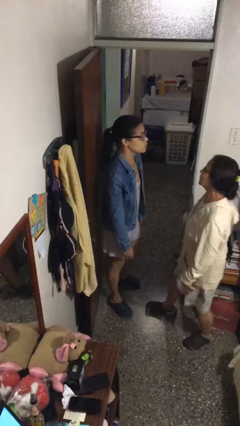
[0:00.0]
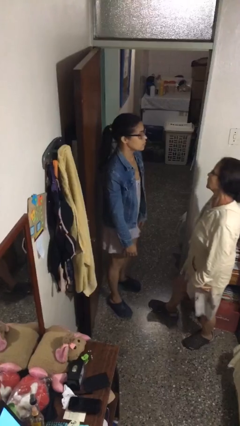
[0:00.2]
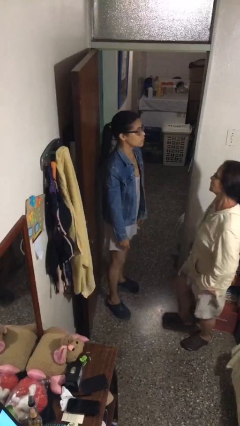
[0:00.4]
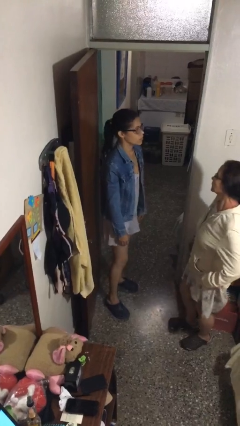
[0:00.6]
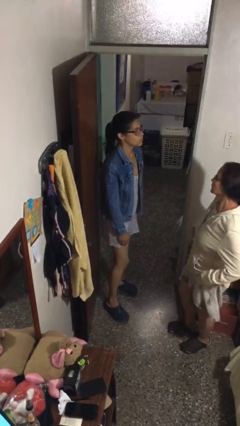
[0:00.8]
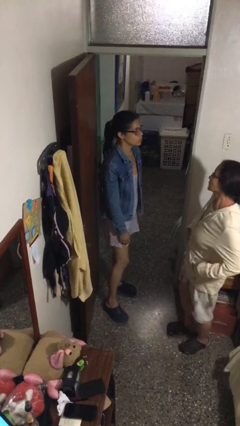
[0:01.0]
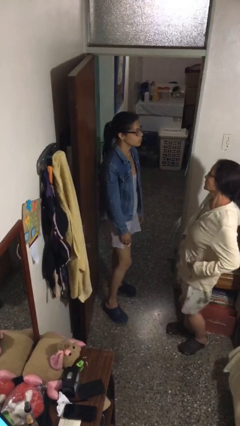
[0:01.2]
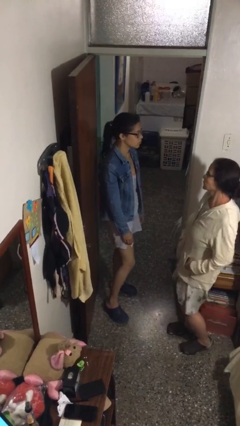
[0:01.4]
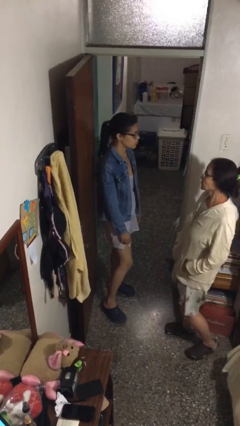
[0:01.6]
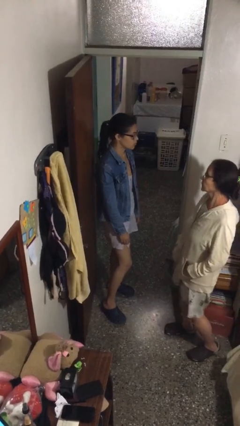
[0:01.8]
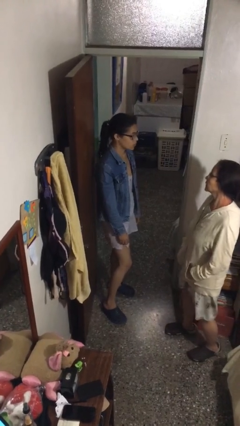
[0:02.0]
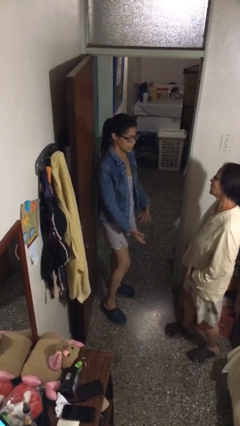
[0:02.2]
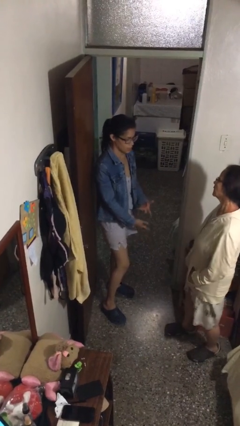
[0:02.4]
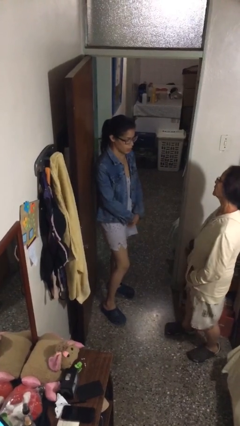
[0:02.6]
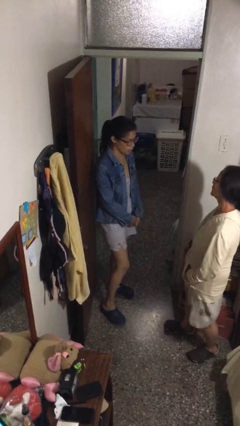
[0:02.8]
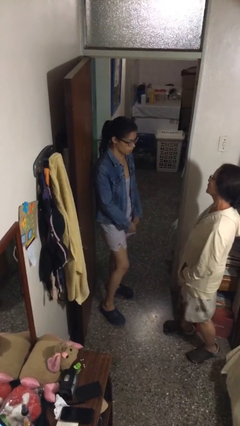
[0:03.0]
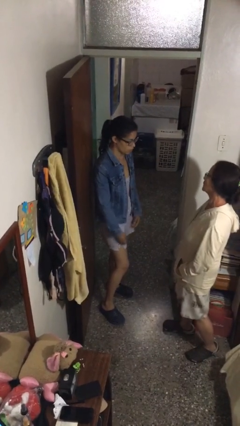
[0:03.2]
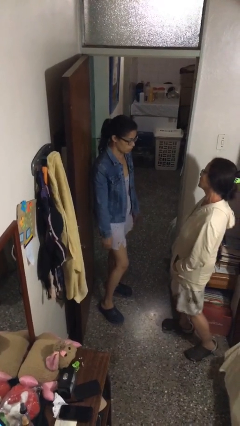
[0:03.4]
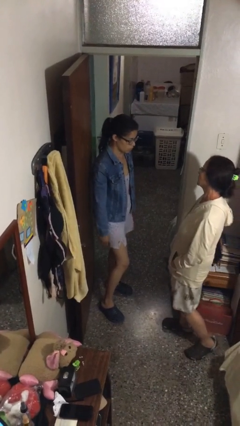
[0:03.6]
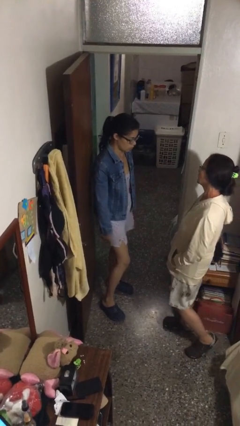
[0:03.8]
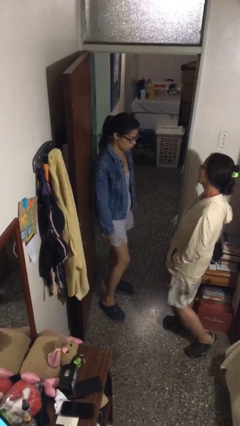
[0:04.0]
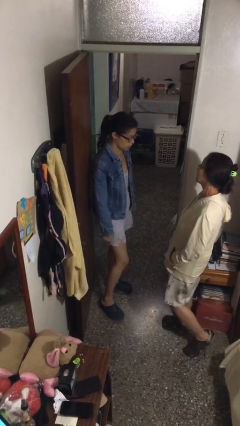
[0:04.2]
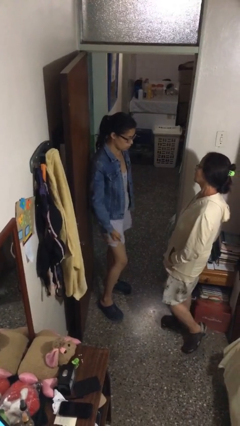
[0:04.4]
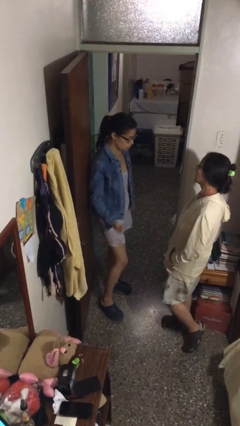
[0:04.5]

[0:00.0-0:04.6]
person talks to person

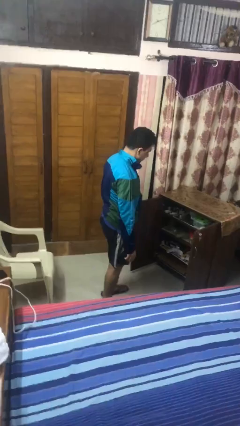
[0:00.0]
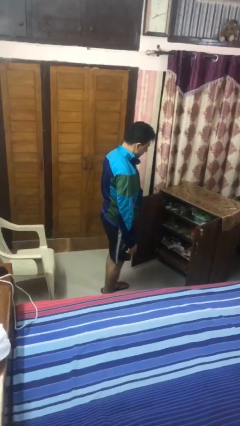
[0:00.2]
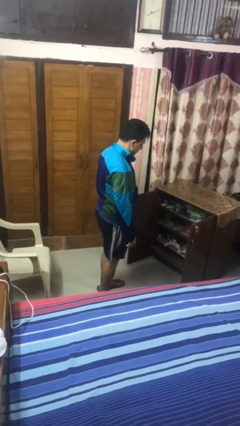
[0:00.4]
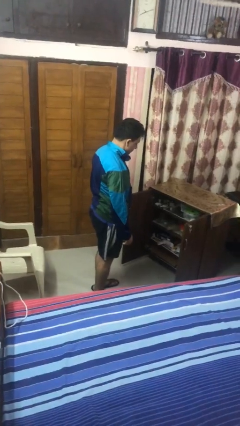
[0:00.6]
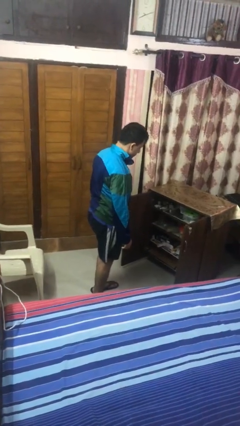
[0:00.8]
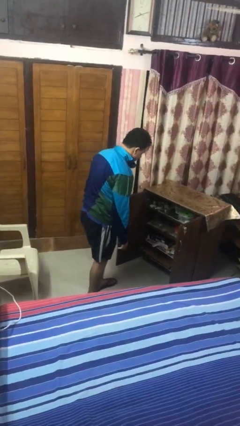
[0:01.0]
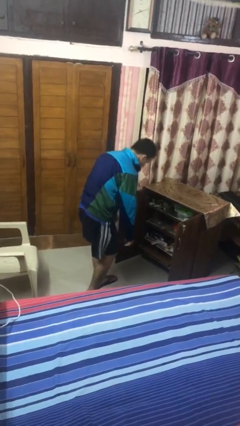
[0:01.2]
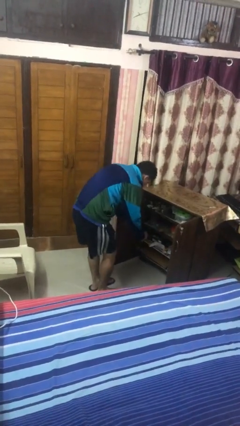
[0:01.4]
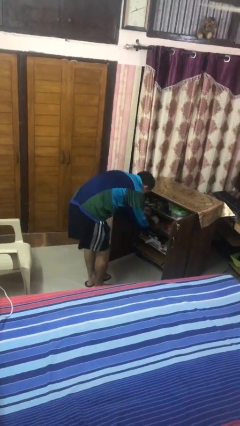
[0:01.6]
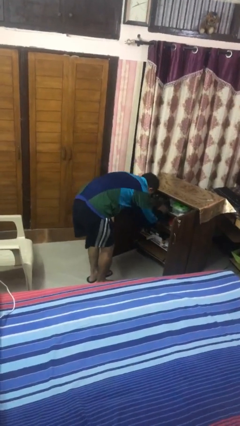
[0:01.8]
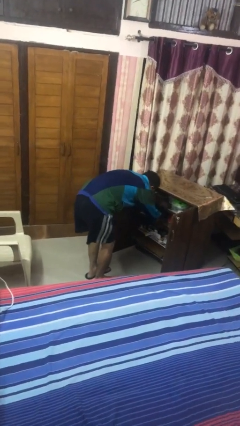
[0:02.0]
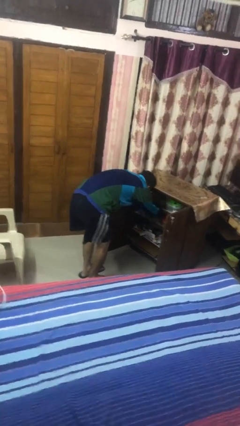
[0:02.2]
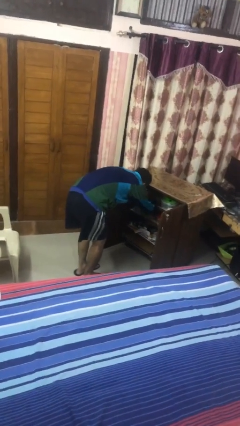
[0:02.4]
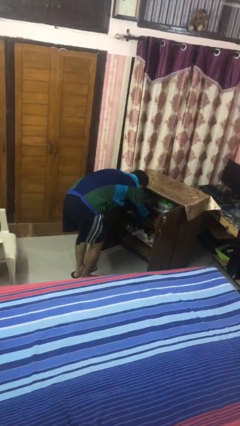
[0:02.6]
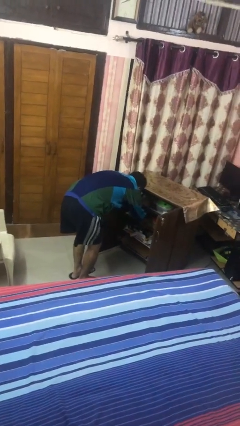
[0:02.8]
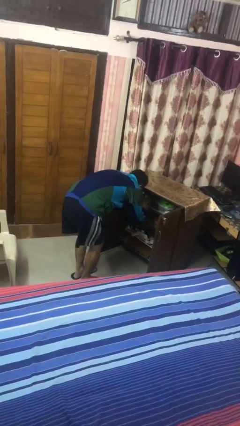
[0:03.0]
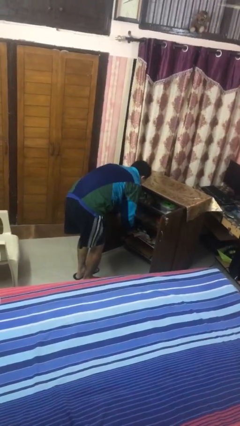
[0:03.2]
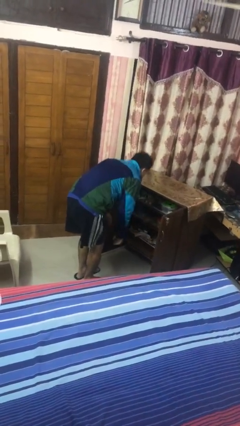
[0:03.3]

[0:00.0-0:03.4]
person searches in cabinet

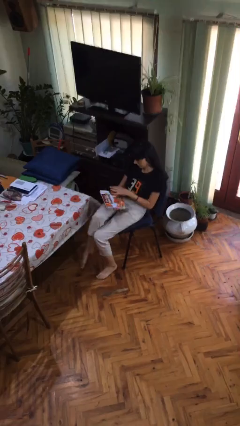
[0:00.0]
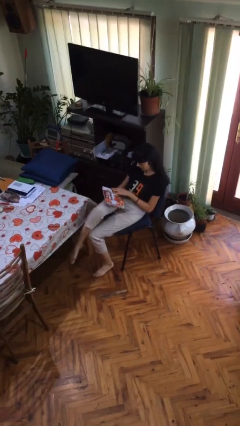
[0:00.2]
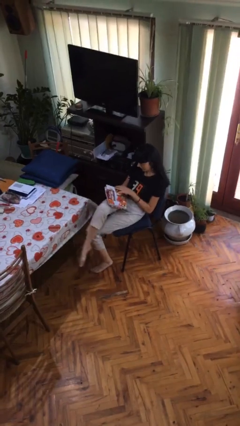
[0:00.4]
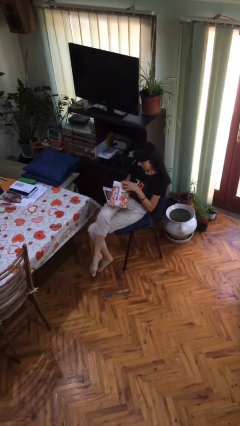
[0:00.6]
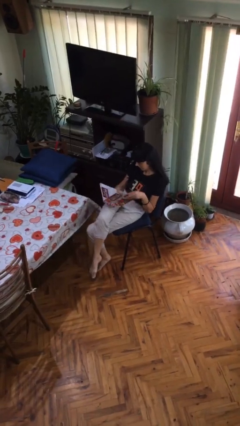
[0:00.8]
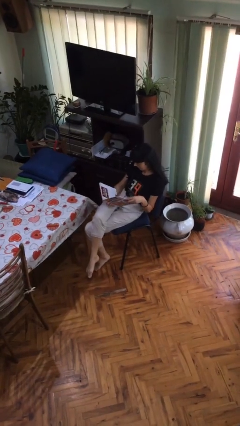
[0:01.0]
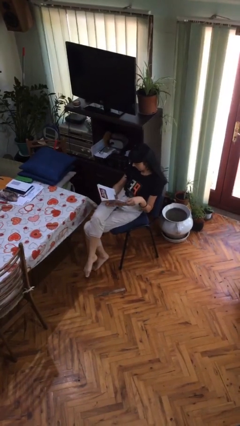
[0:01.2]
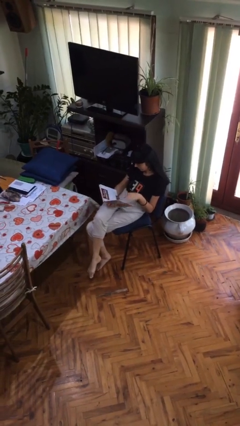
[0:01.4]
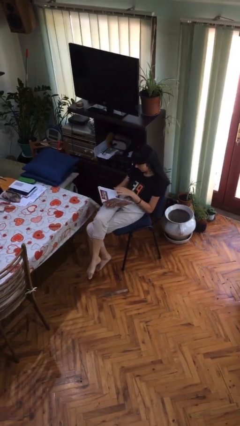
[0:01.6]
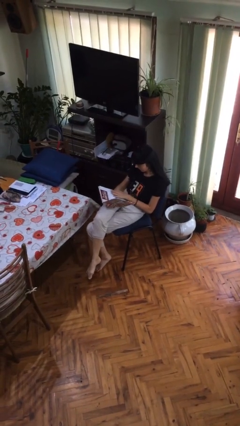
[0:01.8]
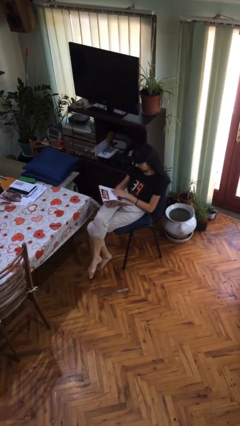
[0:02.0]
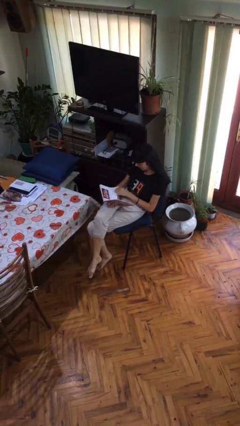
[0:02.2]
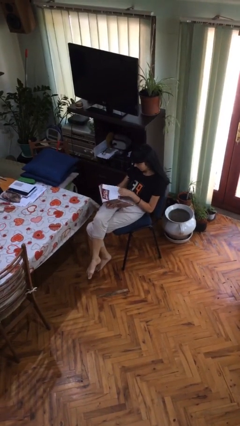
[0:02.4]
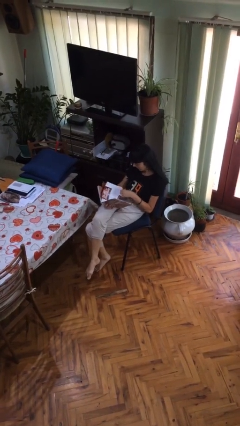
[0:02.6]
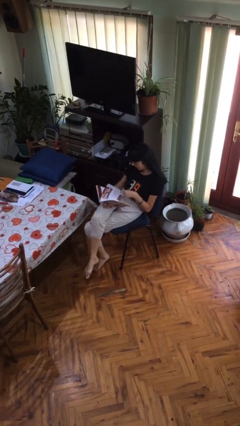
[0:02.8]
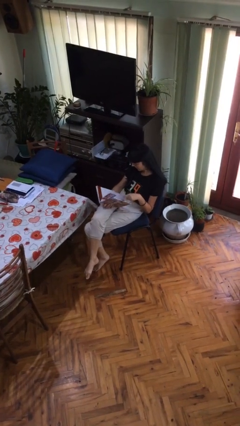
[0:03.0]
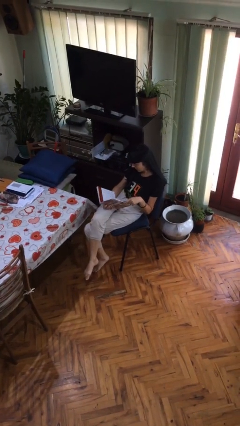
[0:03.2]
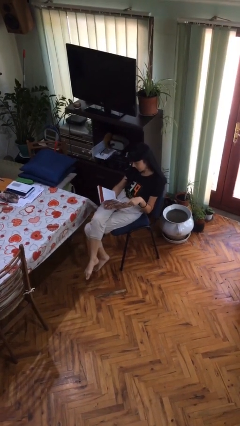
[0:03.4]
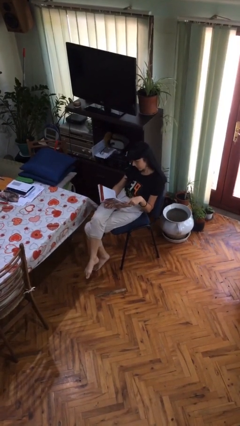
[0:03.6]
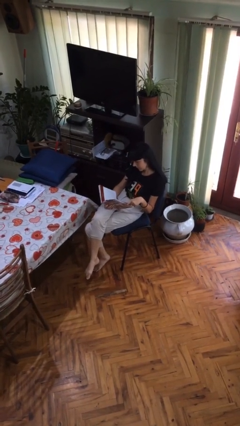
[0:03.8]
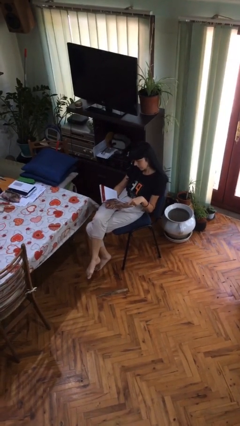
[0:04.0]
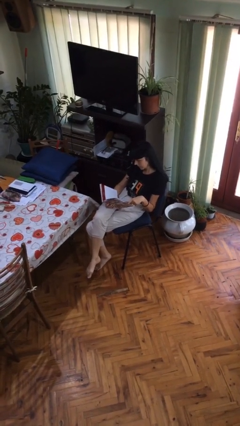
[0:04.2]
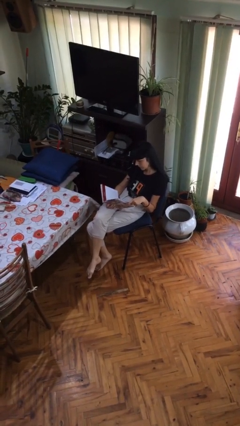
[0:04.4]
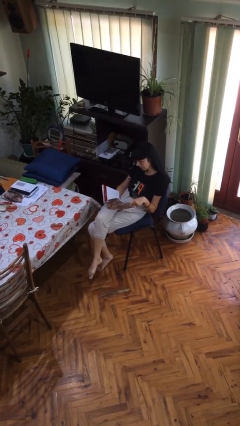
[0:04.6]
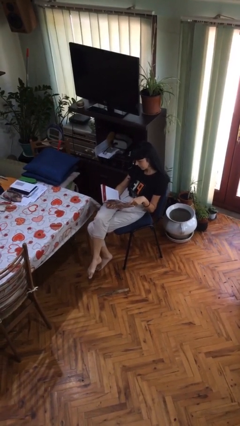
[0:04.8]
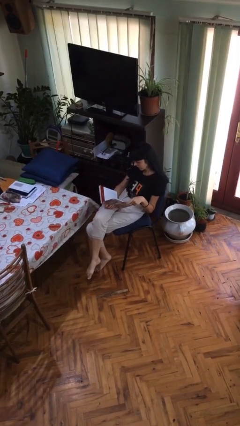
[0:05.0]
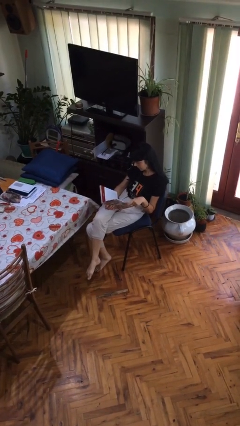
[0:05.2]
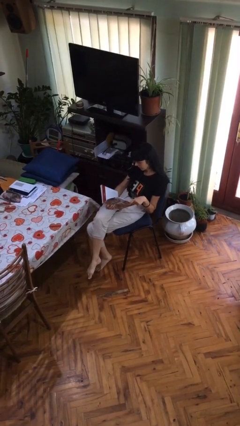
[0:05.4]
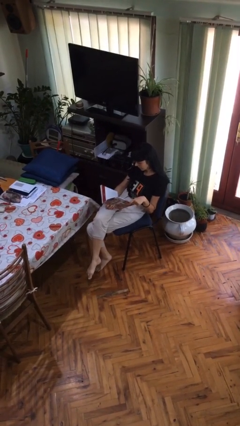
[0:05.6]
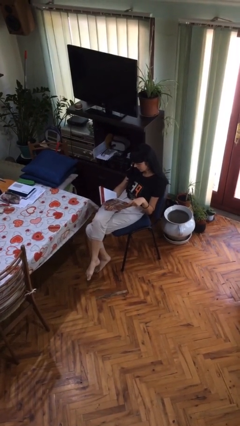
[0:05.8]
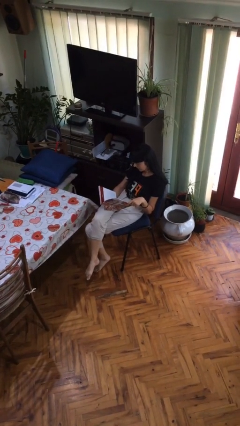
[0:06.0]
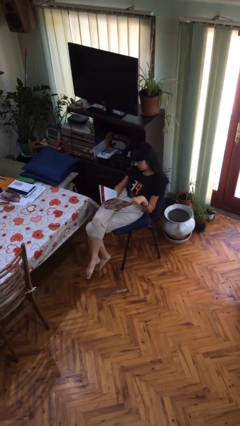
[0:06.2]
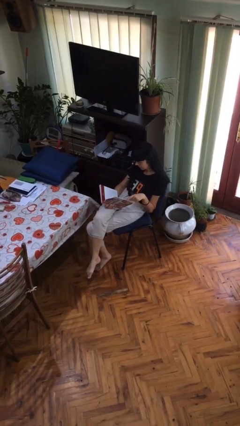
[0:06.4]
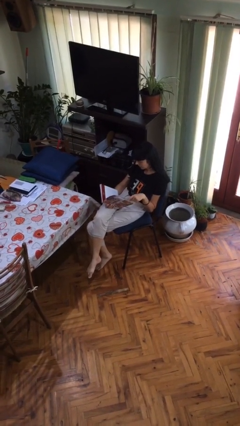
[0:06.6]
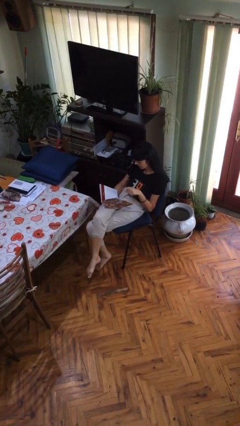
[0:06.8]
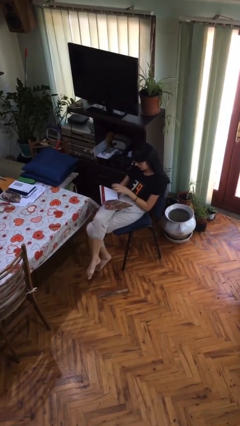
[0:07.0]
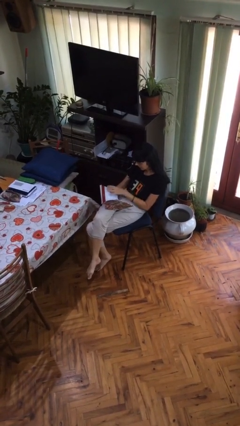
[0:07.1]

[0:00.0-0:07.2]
person reads document

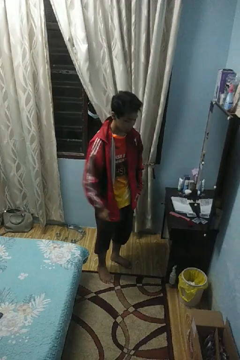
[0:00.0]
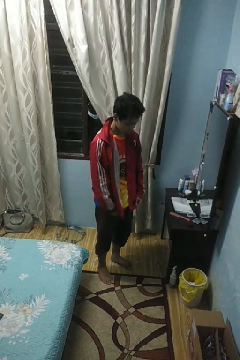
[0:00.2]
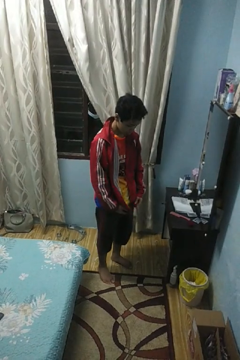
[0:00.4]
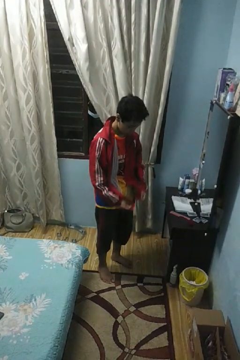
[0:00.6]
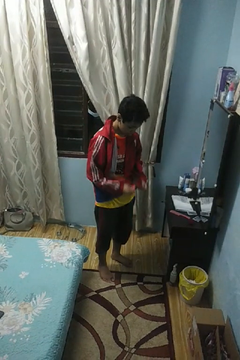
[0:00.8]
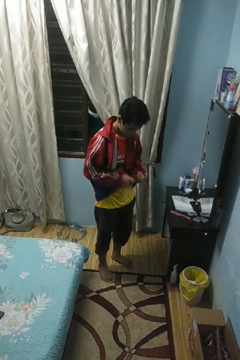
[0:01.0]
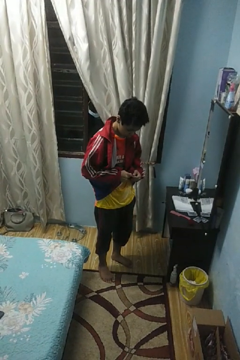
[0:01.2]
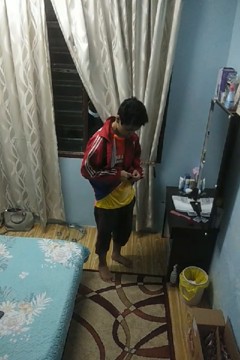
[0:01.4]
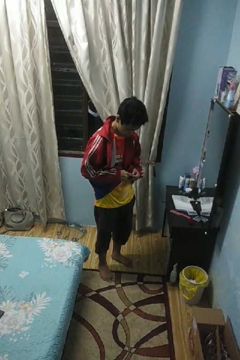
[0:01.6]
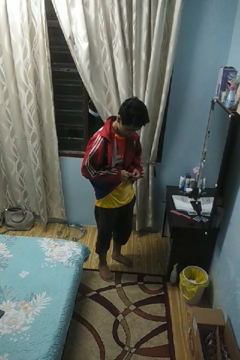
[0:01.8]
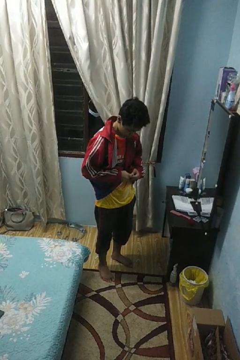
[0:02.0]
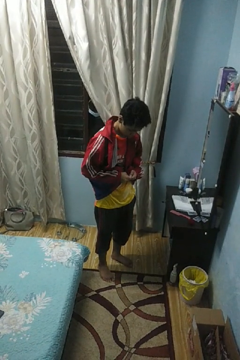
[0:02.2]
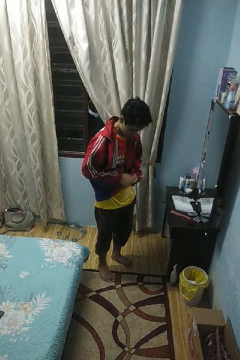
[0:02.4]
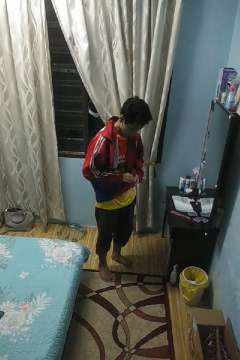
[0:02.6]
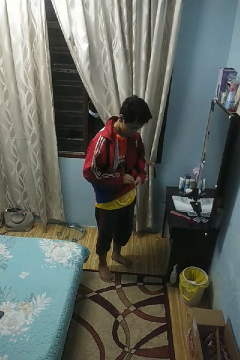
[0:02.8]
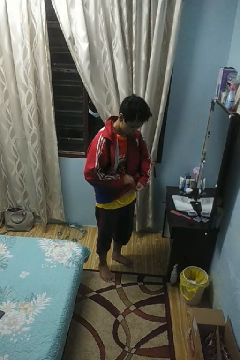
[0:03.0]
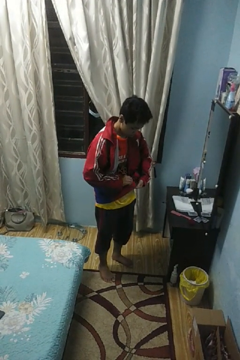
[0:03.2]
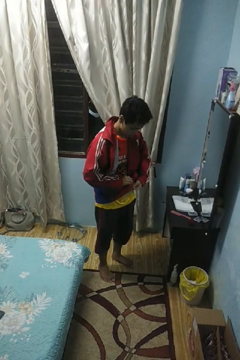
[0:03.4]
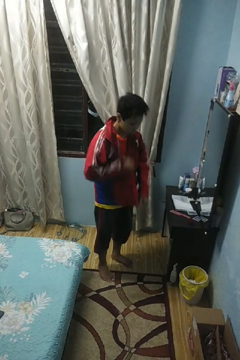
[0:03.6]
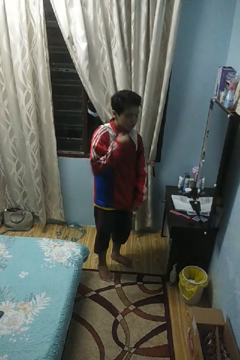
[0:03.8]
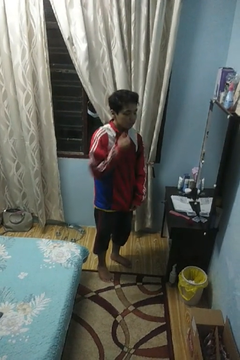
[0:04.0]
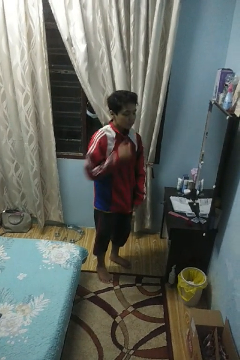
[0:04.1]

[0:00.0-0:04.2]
person zips up jacket
